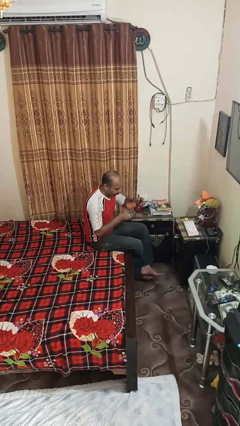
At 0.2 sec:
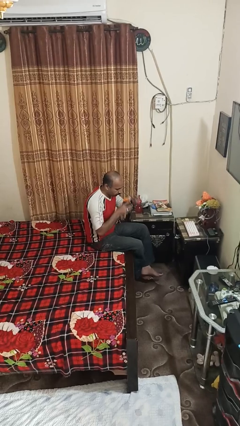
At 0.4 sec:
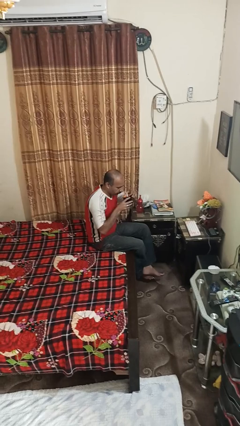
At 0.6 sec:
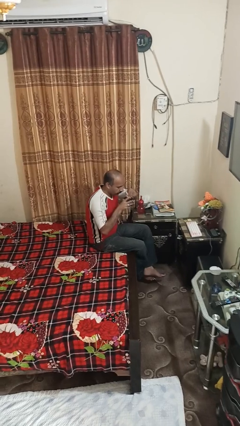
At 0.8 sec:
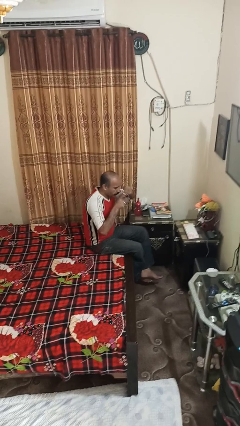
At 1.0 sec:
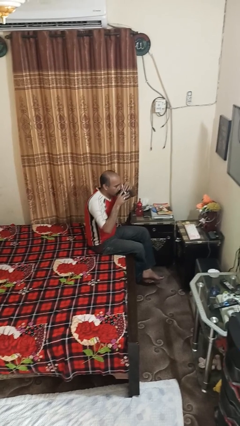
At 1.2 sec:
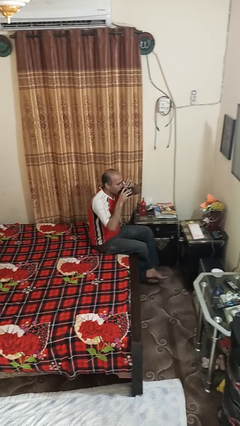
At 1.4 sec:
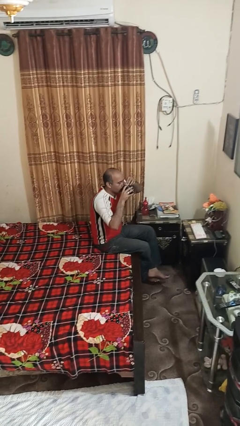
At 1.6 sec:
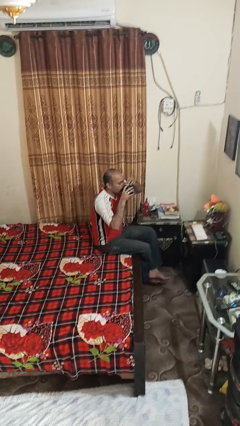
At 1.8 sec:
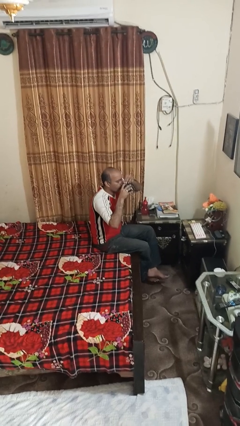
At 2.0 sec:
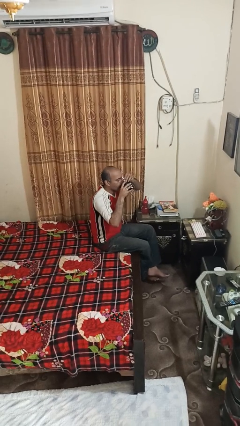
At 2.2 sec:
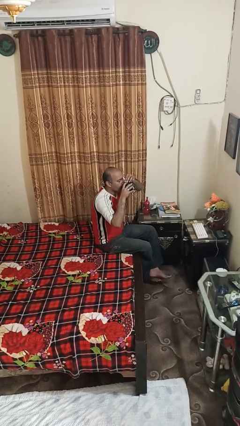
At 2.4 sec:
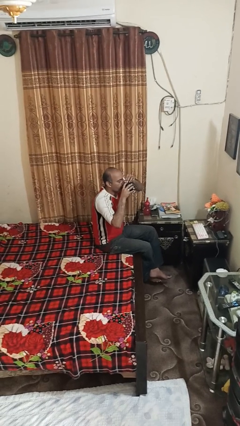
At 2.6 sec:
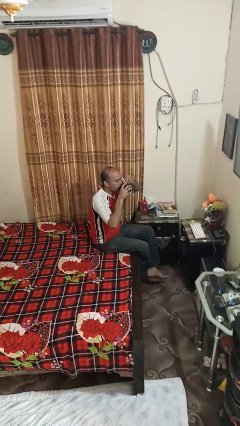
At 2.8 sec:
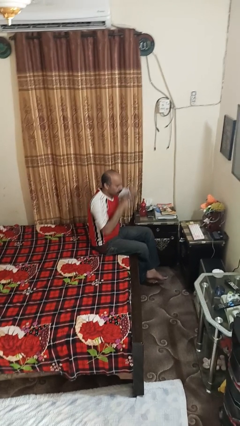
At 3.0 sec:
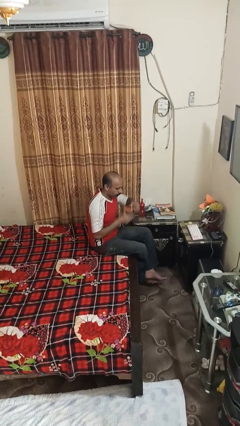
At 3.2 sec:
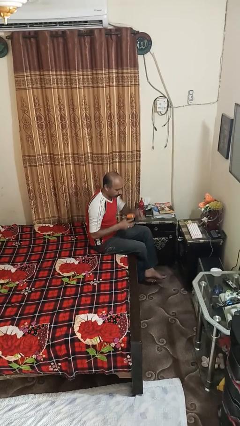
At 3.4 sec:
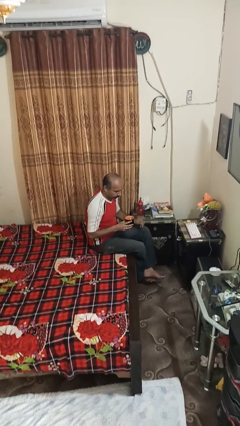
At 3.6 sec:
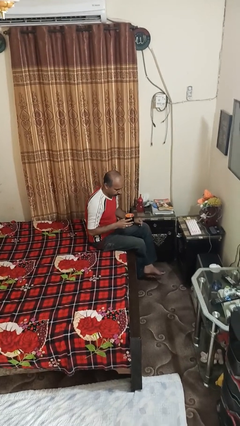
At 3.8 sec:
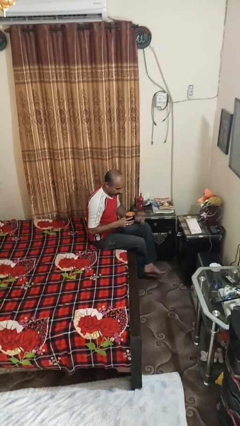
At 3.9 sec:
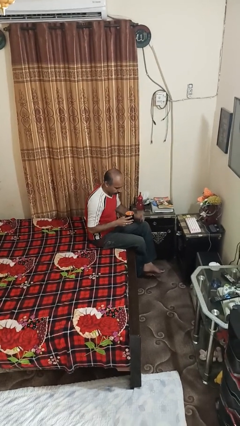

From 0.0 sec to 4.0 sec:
person drinks from mug

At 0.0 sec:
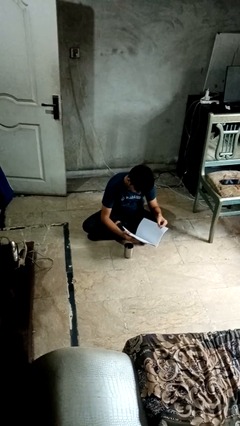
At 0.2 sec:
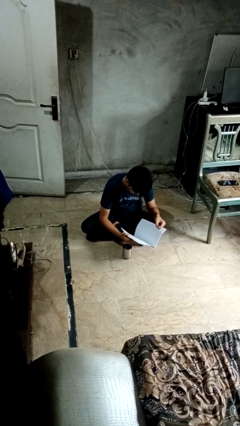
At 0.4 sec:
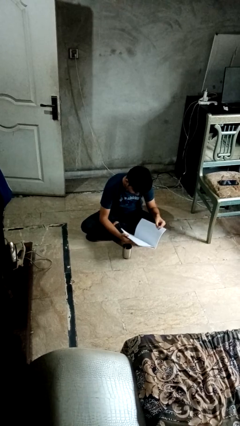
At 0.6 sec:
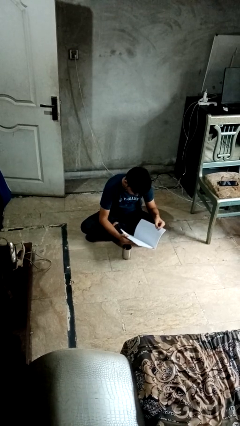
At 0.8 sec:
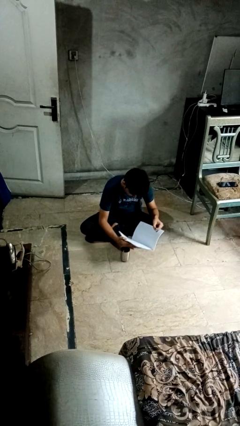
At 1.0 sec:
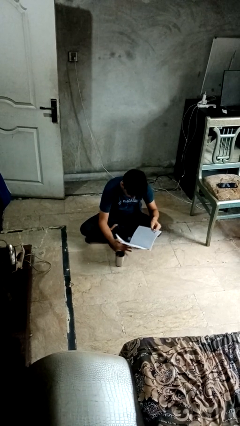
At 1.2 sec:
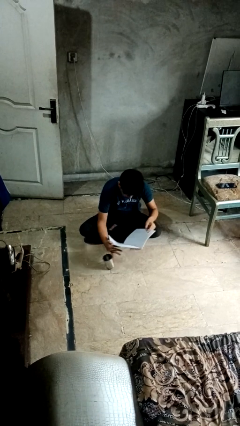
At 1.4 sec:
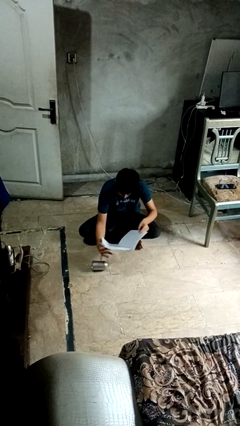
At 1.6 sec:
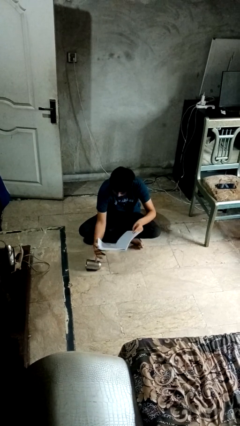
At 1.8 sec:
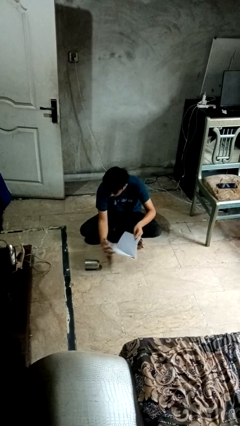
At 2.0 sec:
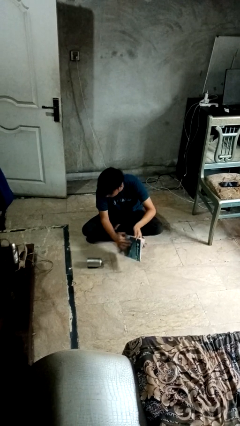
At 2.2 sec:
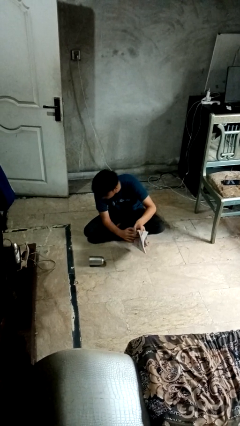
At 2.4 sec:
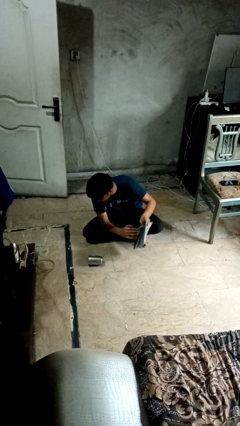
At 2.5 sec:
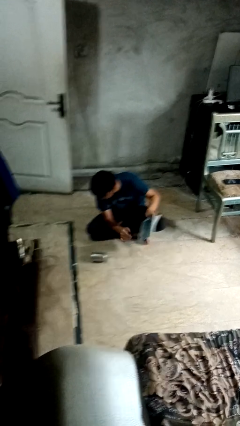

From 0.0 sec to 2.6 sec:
person spills on floor

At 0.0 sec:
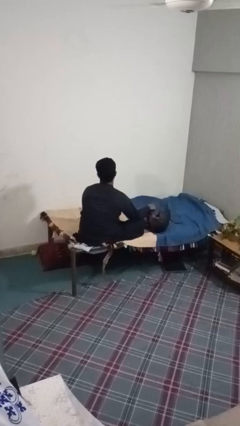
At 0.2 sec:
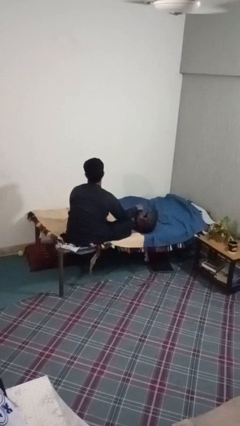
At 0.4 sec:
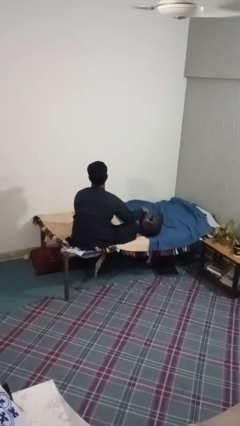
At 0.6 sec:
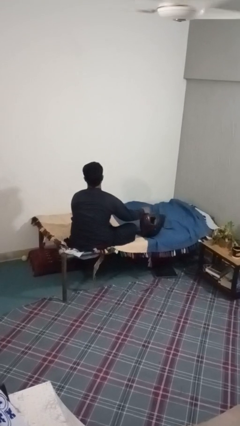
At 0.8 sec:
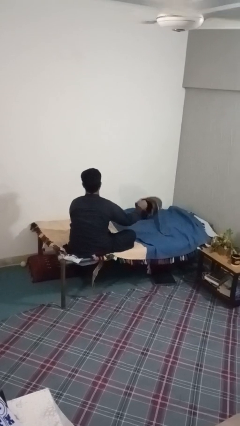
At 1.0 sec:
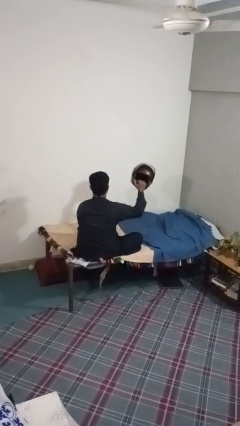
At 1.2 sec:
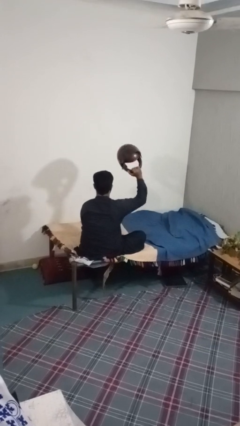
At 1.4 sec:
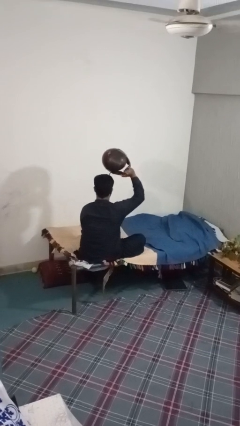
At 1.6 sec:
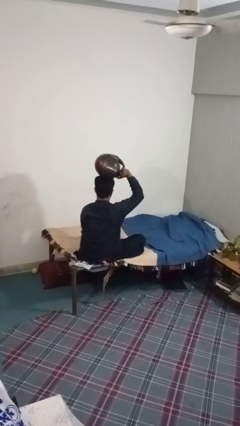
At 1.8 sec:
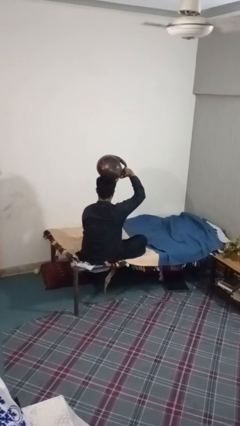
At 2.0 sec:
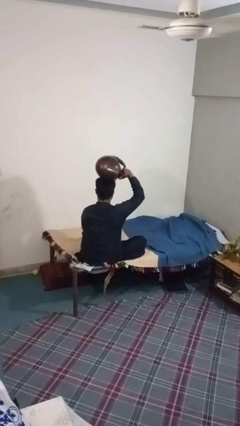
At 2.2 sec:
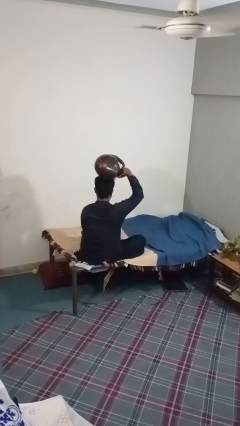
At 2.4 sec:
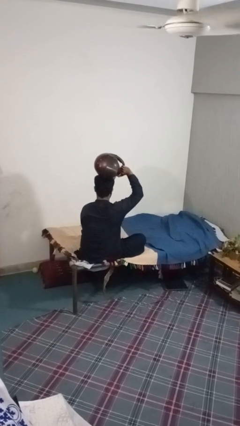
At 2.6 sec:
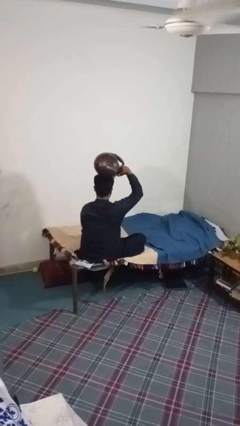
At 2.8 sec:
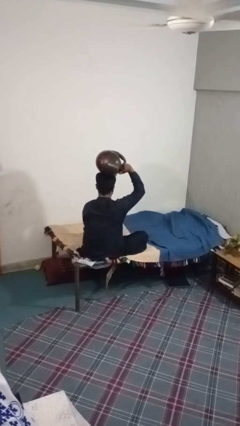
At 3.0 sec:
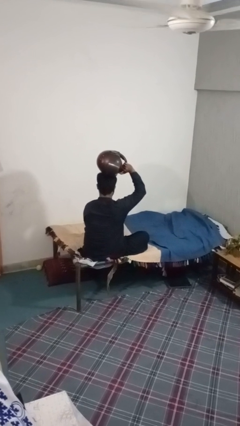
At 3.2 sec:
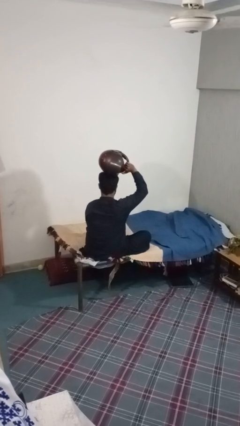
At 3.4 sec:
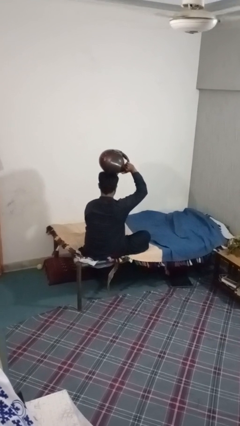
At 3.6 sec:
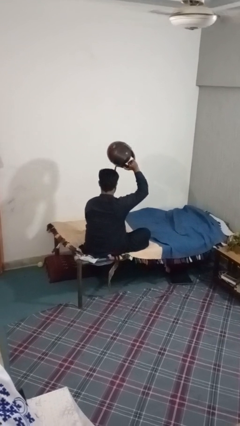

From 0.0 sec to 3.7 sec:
person holds object above head

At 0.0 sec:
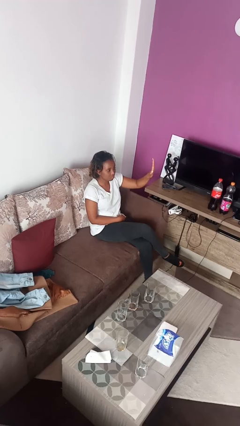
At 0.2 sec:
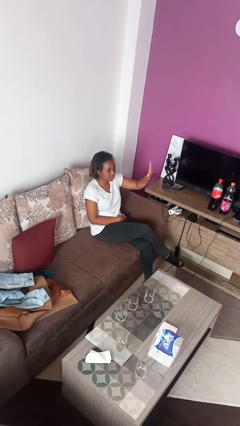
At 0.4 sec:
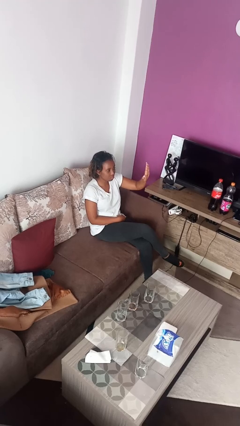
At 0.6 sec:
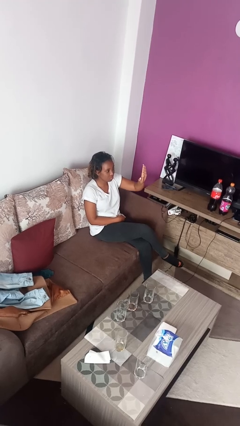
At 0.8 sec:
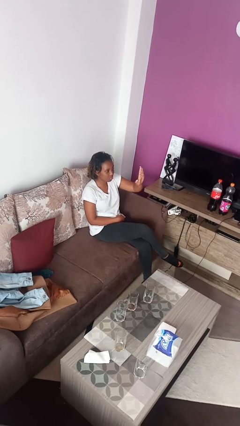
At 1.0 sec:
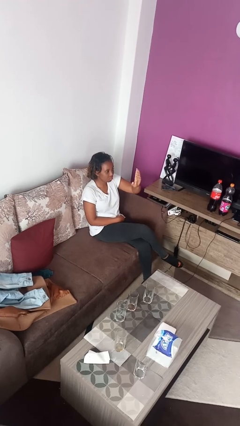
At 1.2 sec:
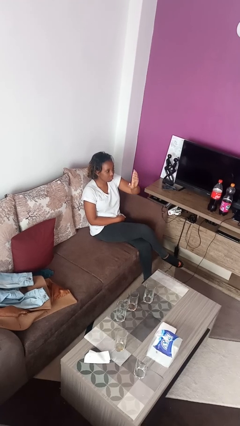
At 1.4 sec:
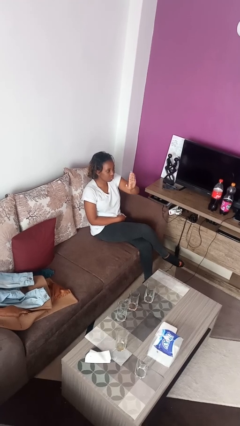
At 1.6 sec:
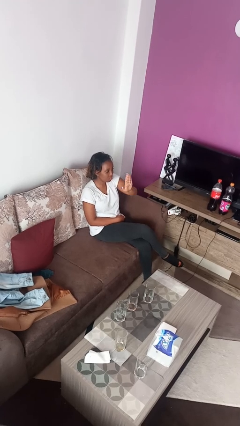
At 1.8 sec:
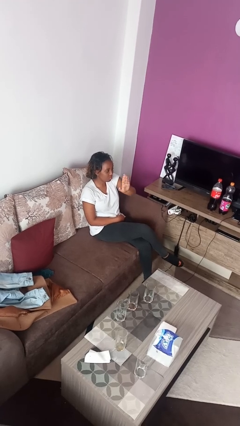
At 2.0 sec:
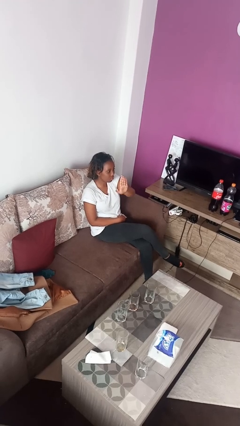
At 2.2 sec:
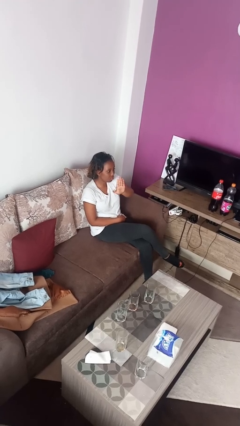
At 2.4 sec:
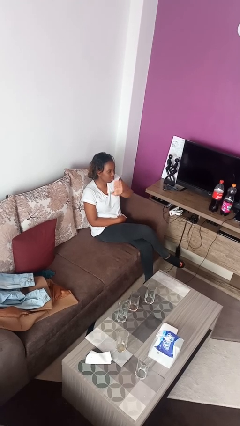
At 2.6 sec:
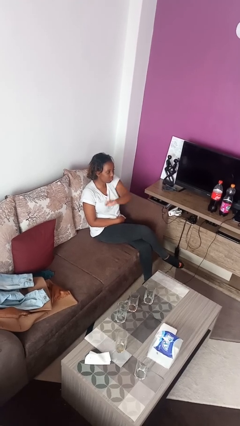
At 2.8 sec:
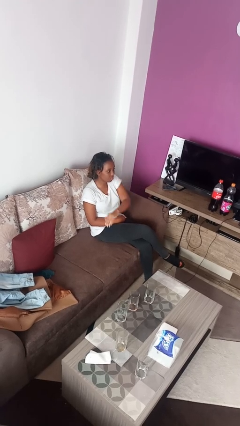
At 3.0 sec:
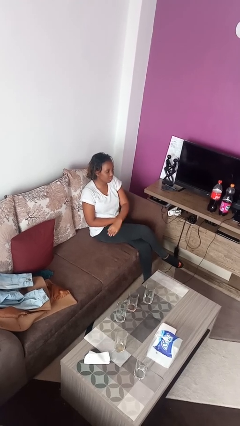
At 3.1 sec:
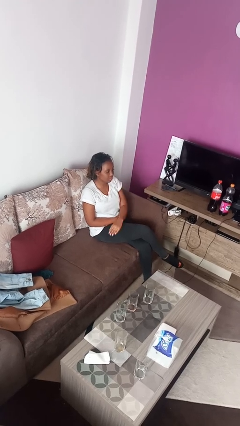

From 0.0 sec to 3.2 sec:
person gestures swipe right

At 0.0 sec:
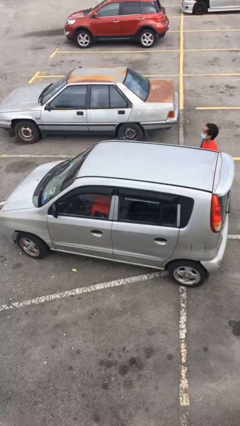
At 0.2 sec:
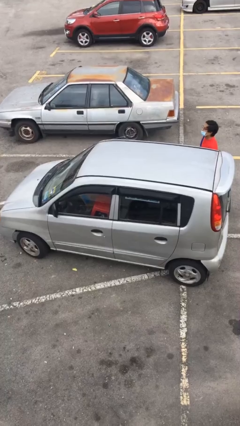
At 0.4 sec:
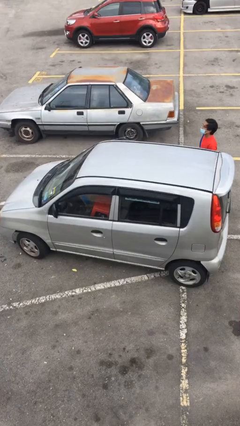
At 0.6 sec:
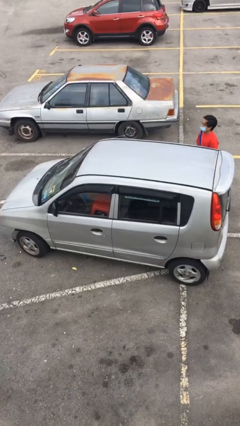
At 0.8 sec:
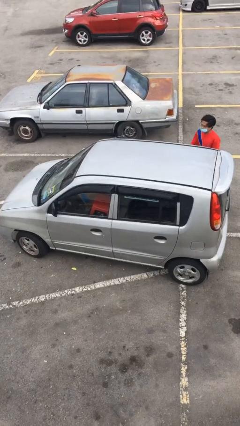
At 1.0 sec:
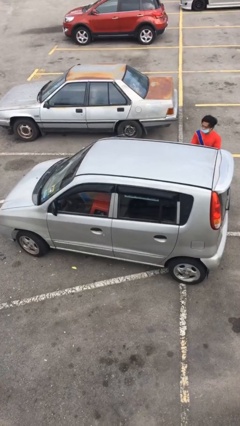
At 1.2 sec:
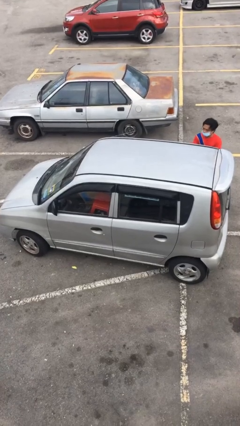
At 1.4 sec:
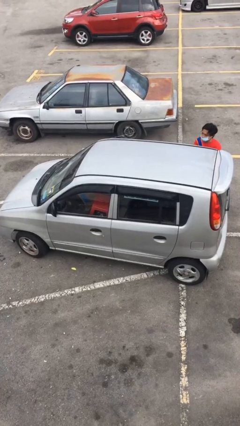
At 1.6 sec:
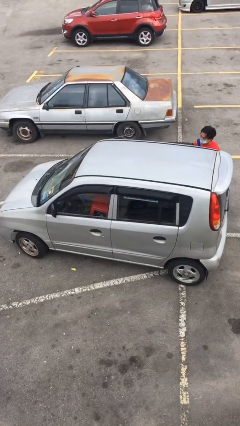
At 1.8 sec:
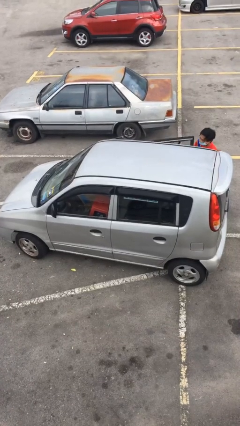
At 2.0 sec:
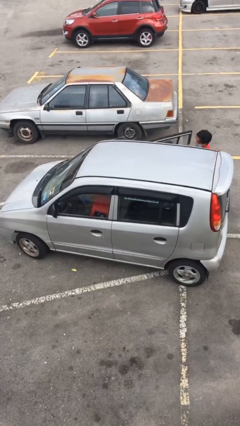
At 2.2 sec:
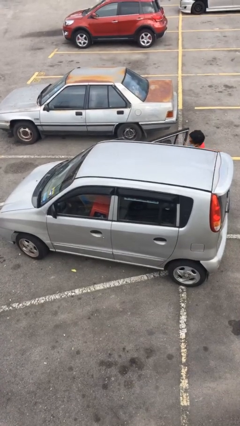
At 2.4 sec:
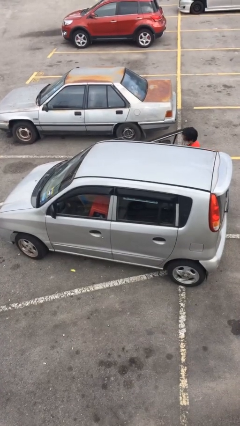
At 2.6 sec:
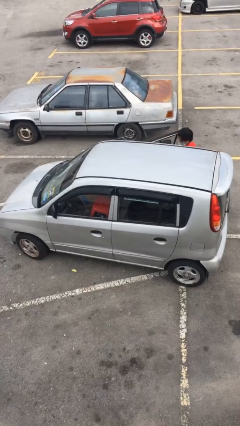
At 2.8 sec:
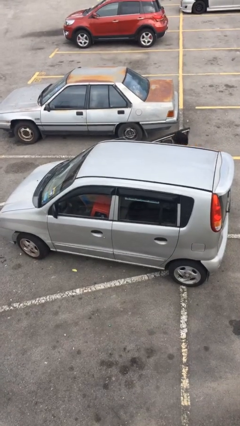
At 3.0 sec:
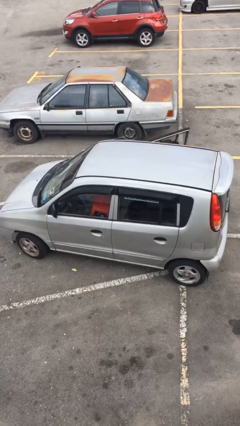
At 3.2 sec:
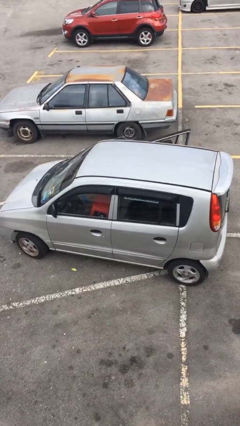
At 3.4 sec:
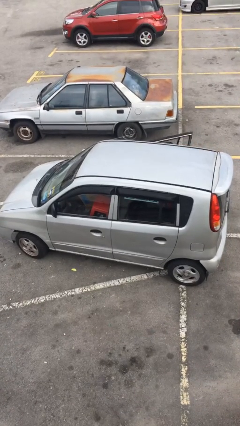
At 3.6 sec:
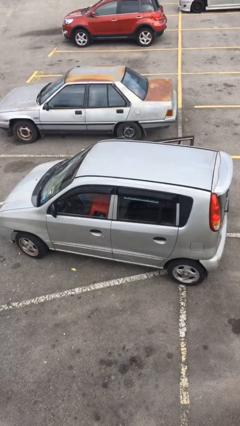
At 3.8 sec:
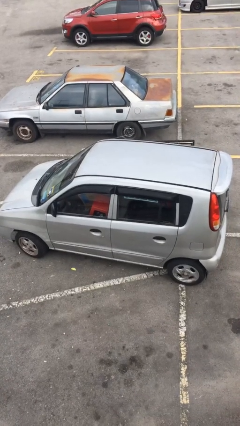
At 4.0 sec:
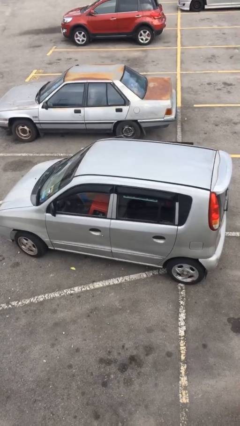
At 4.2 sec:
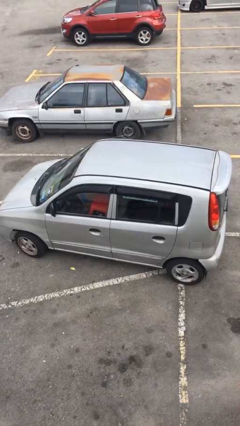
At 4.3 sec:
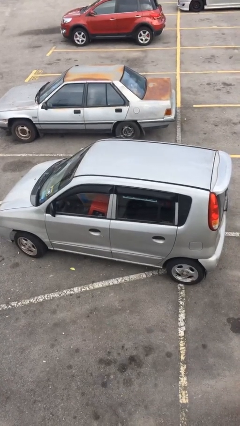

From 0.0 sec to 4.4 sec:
car picks up person
